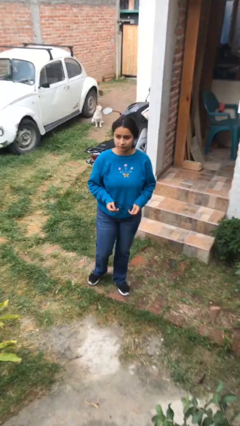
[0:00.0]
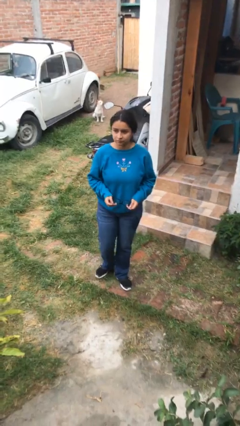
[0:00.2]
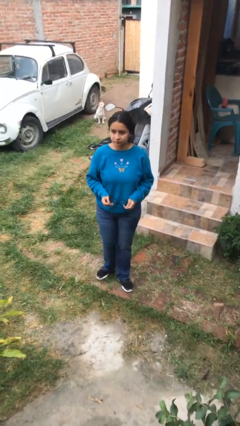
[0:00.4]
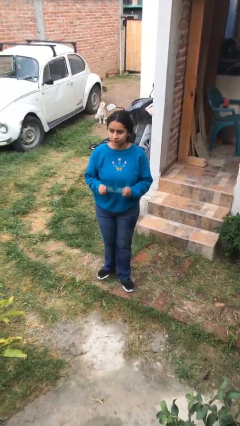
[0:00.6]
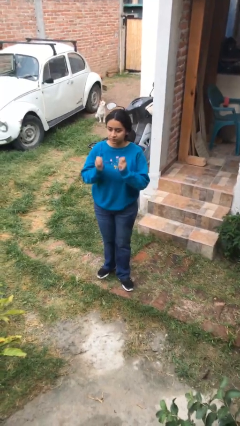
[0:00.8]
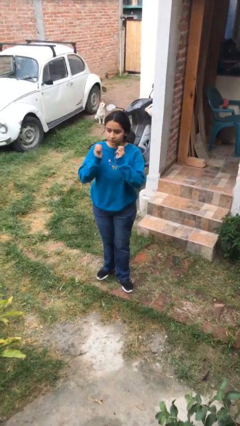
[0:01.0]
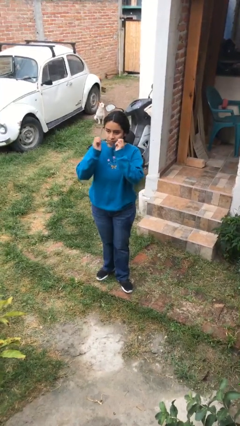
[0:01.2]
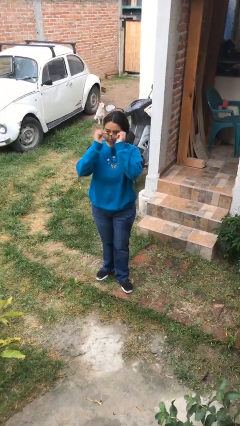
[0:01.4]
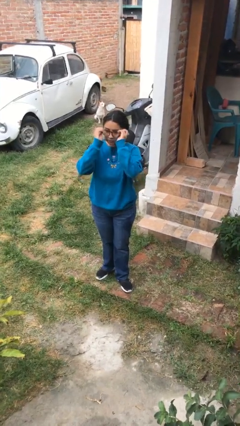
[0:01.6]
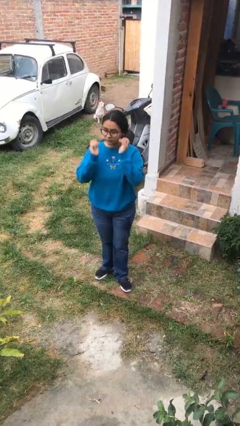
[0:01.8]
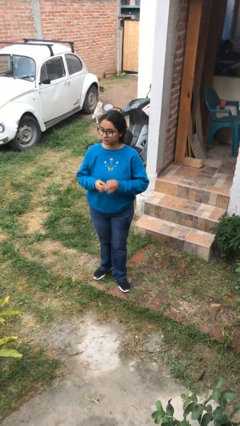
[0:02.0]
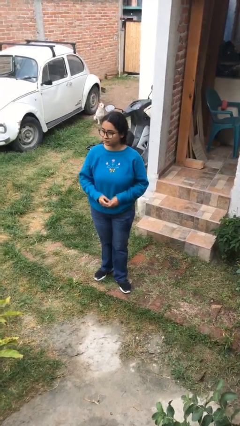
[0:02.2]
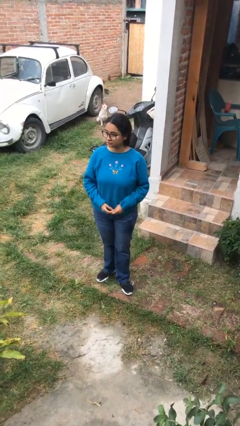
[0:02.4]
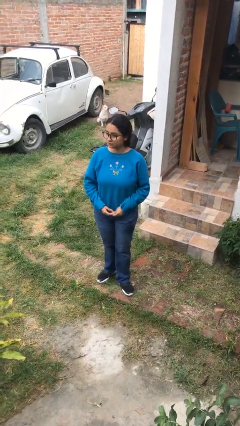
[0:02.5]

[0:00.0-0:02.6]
person puts on glasses

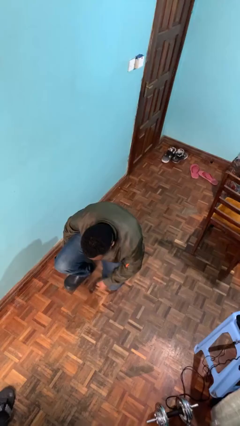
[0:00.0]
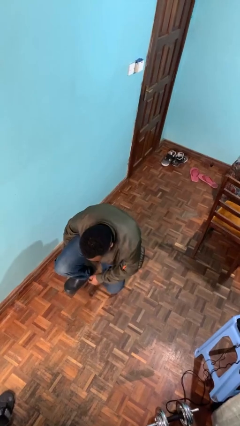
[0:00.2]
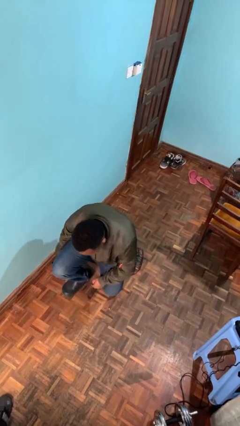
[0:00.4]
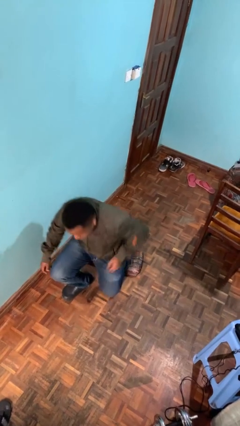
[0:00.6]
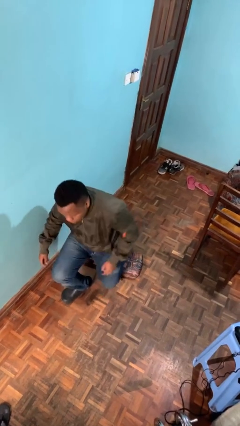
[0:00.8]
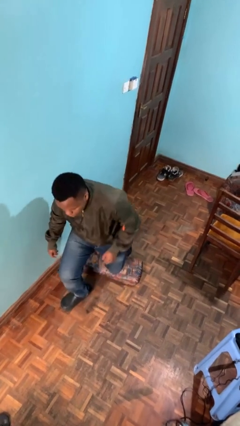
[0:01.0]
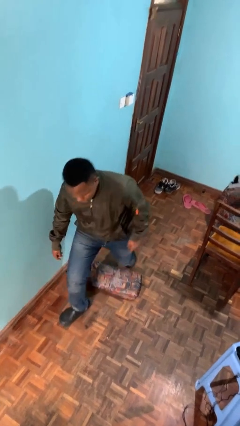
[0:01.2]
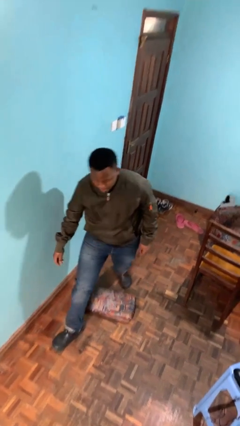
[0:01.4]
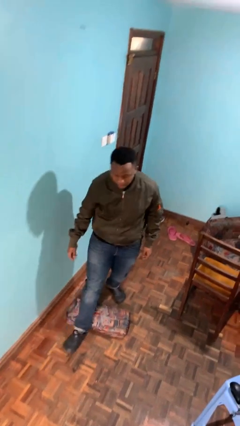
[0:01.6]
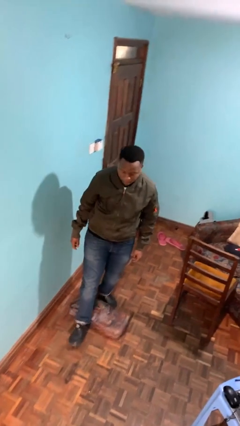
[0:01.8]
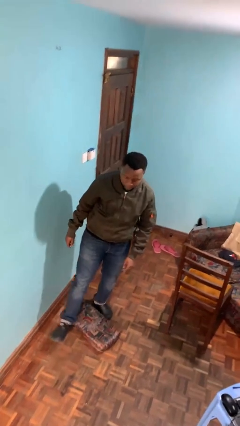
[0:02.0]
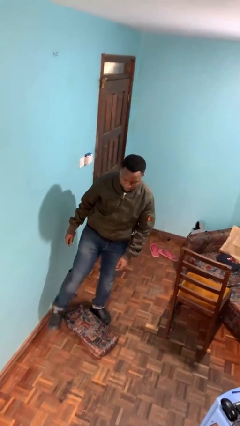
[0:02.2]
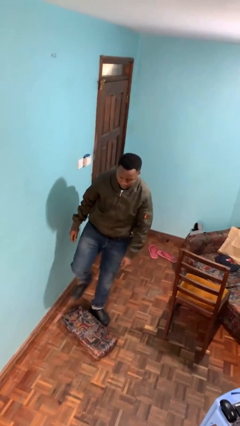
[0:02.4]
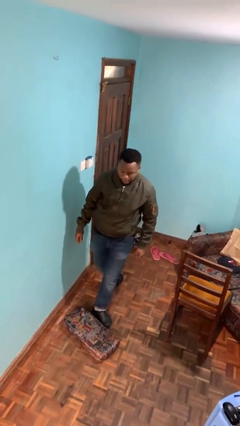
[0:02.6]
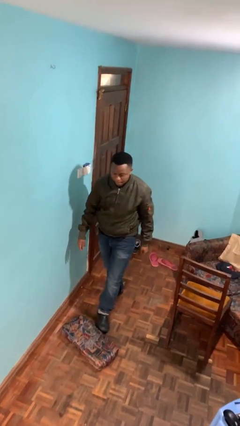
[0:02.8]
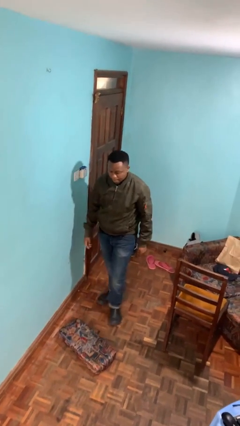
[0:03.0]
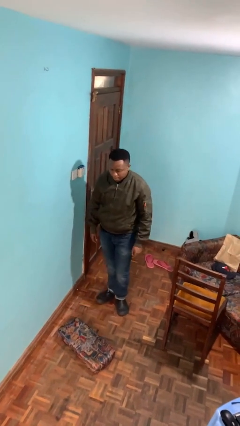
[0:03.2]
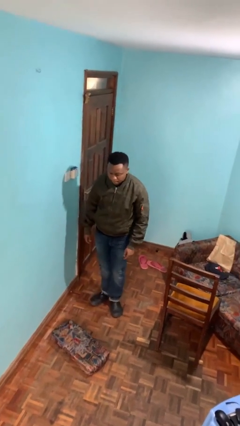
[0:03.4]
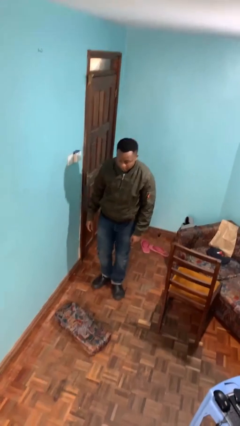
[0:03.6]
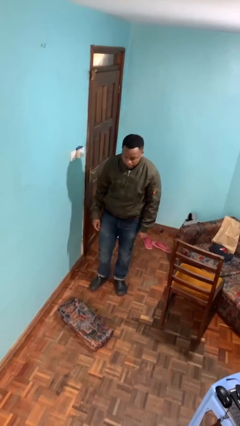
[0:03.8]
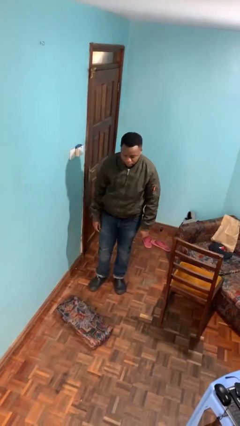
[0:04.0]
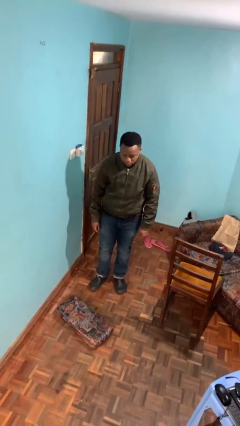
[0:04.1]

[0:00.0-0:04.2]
person stands up from floor

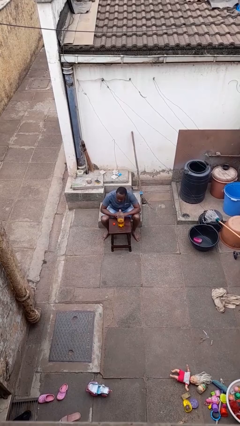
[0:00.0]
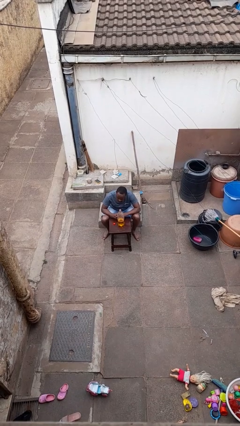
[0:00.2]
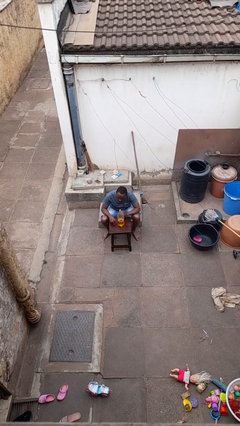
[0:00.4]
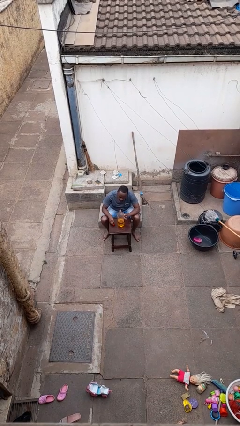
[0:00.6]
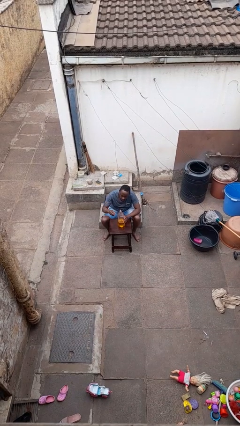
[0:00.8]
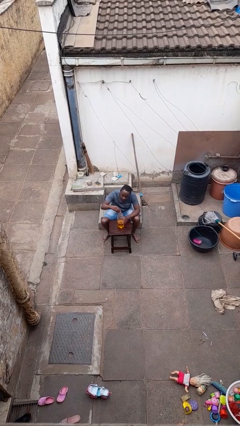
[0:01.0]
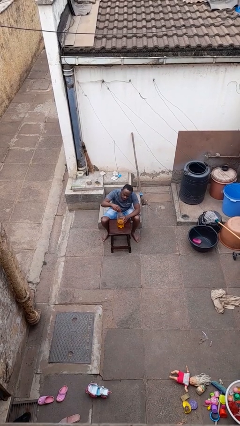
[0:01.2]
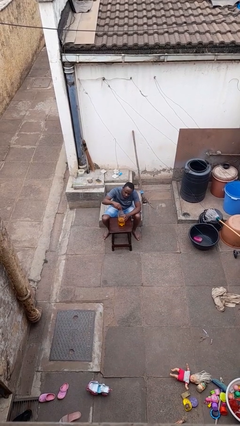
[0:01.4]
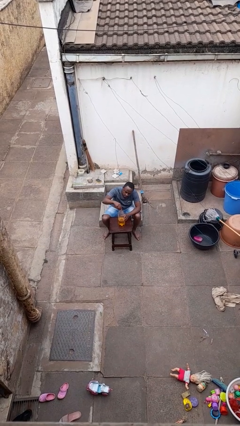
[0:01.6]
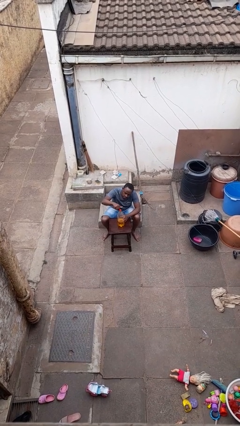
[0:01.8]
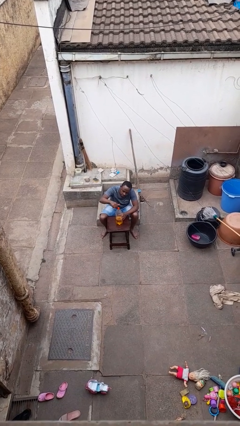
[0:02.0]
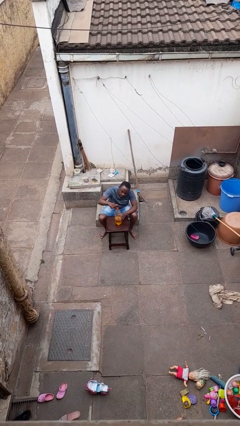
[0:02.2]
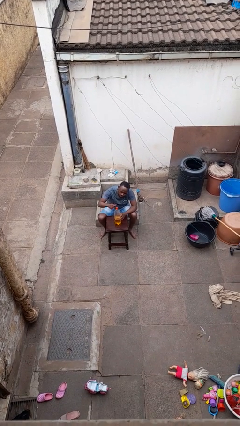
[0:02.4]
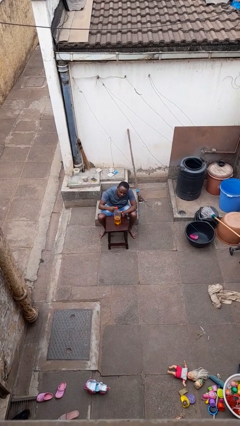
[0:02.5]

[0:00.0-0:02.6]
person screws lid to bottle

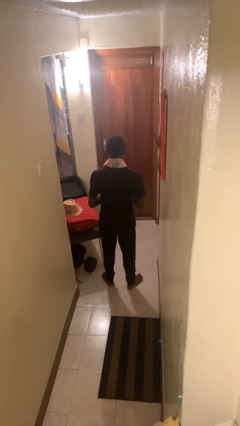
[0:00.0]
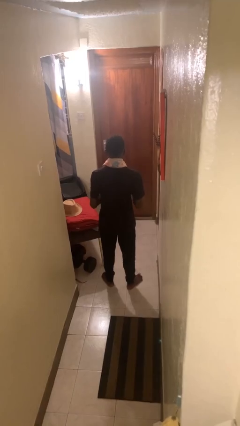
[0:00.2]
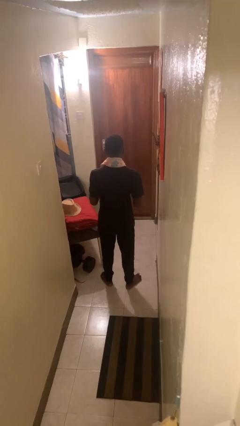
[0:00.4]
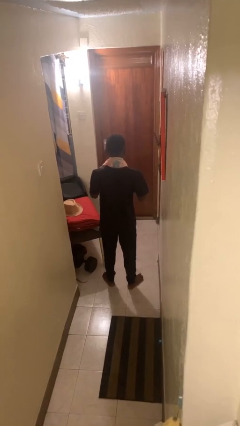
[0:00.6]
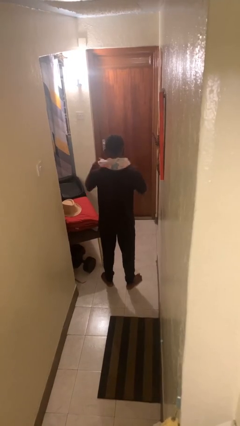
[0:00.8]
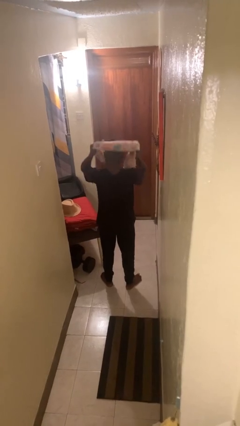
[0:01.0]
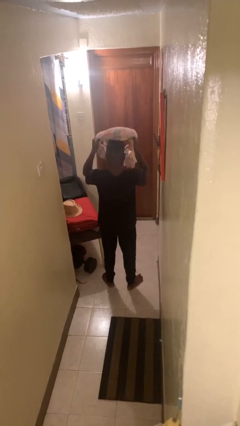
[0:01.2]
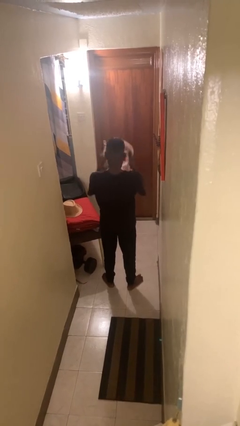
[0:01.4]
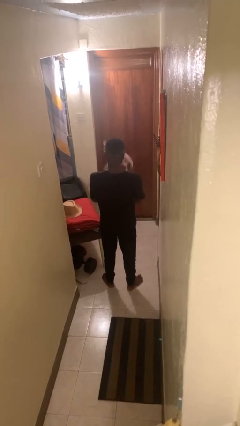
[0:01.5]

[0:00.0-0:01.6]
person takes off scarf

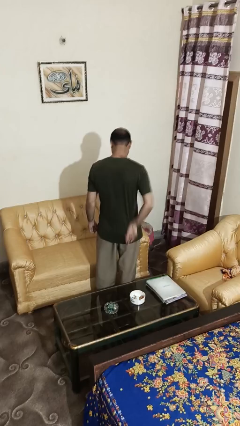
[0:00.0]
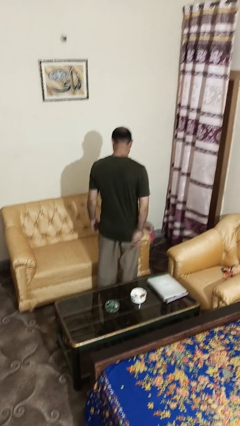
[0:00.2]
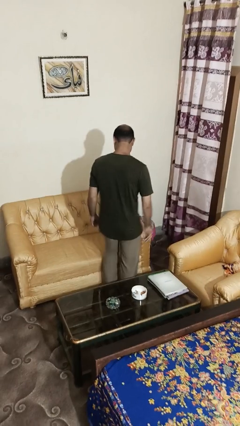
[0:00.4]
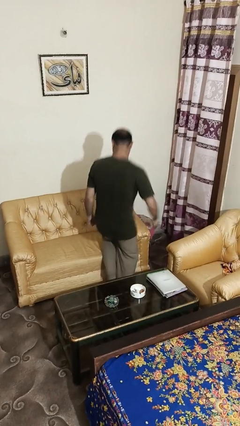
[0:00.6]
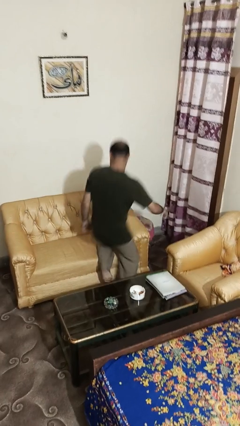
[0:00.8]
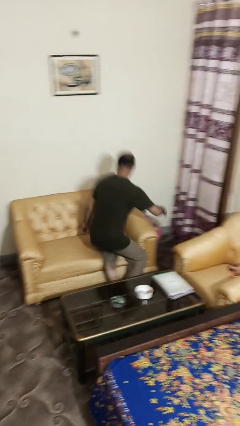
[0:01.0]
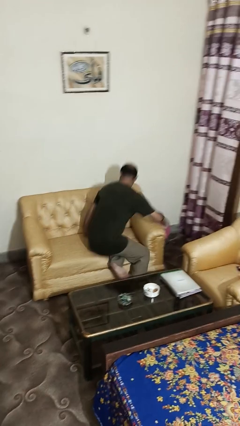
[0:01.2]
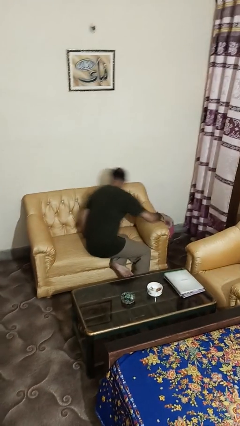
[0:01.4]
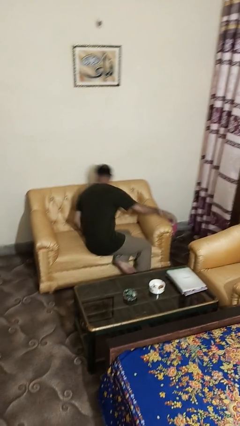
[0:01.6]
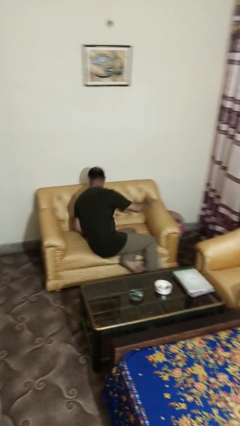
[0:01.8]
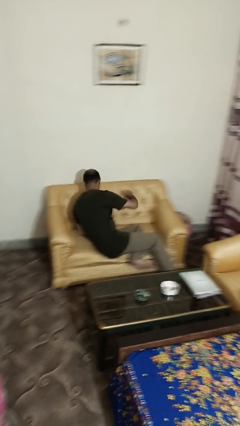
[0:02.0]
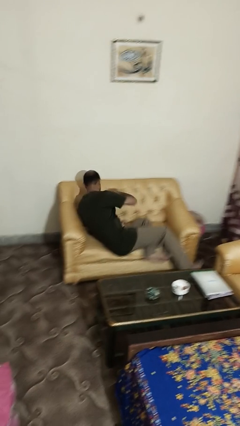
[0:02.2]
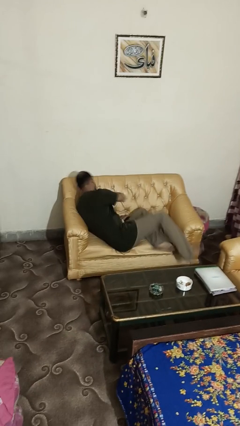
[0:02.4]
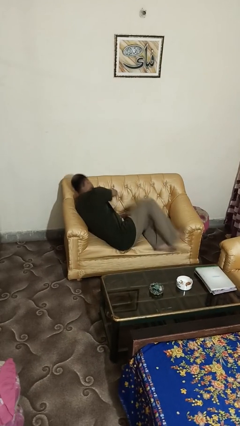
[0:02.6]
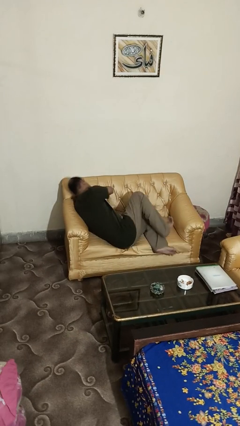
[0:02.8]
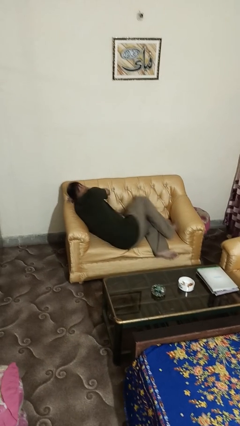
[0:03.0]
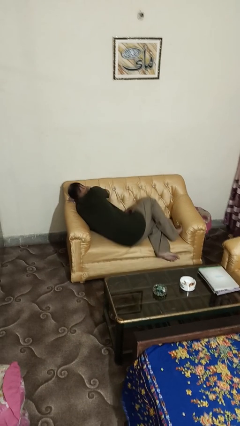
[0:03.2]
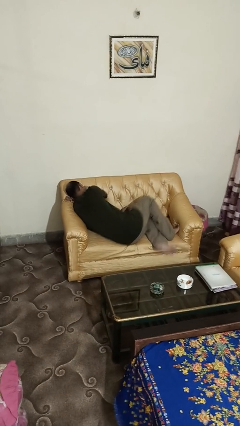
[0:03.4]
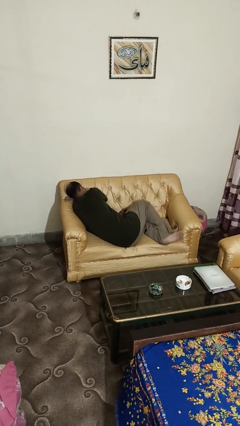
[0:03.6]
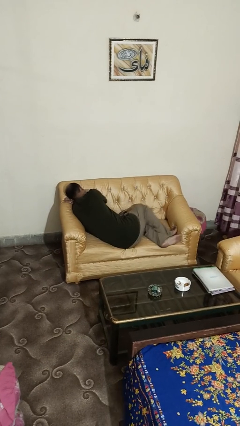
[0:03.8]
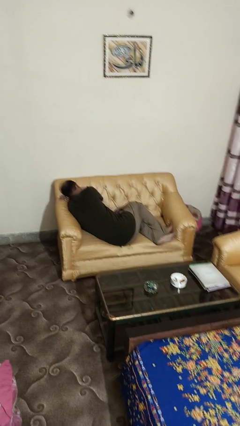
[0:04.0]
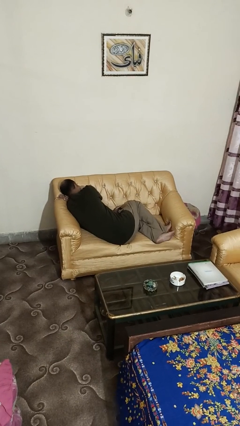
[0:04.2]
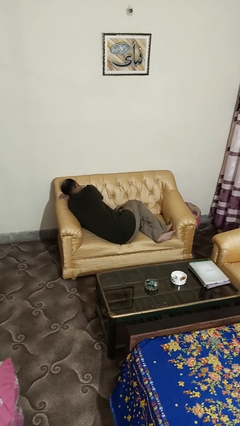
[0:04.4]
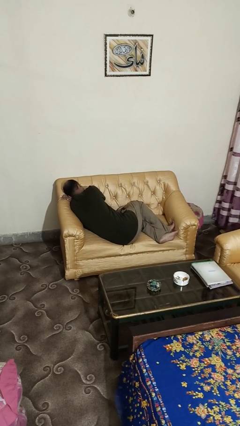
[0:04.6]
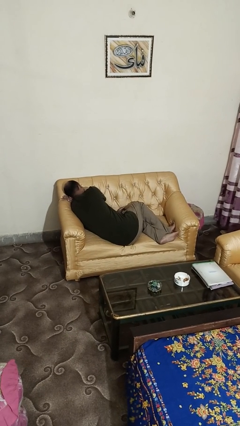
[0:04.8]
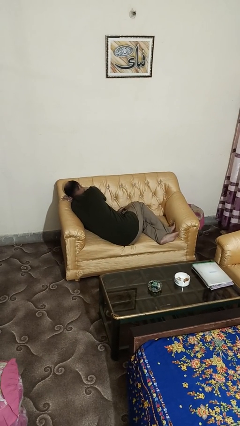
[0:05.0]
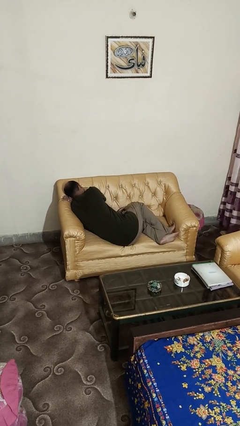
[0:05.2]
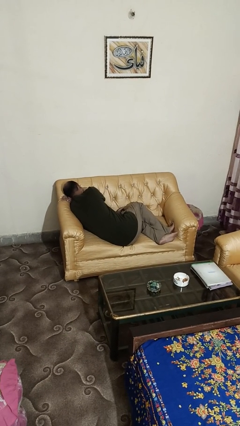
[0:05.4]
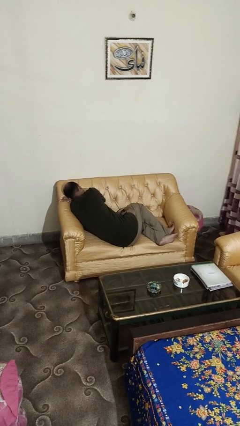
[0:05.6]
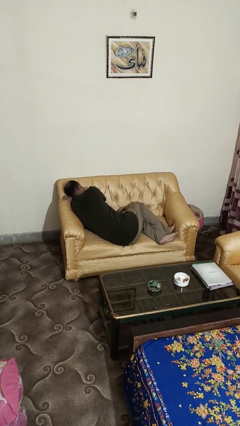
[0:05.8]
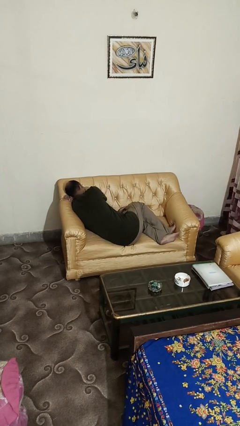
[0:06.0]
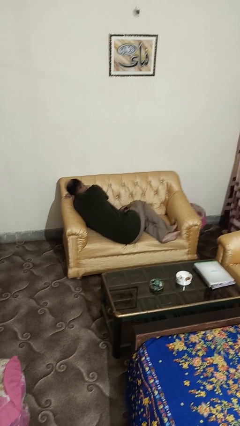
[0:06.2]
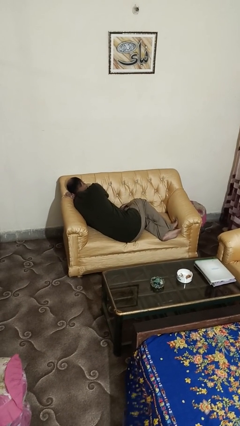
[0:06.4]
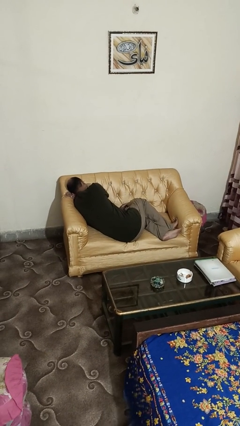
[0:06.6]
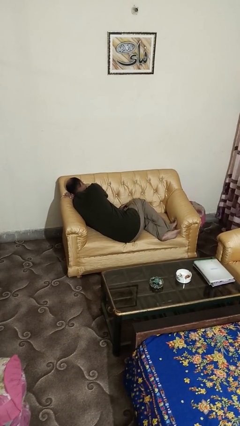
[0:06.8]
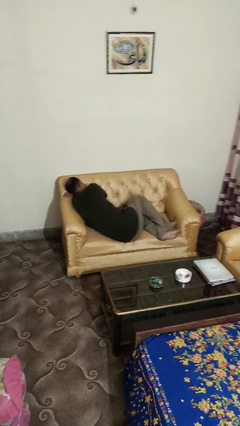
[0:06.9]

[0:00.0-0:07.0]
person lies down on couch
